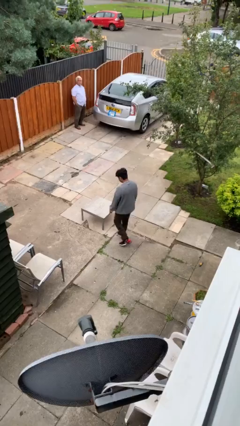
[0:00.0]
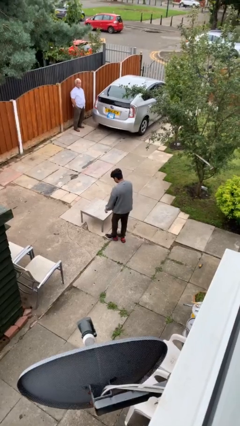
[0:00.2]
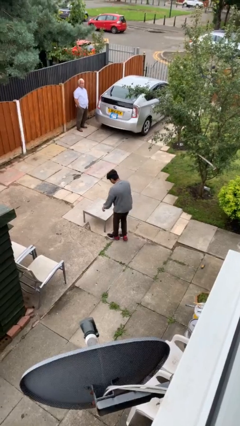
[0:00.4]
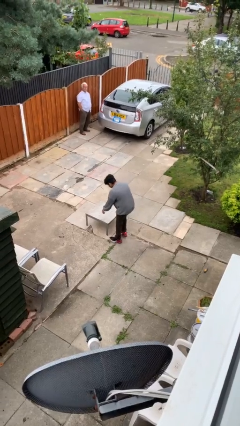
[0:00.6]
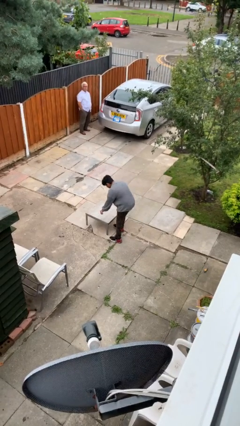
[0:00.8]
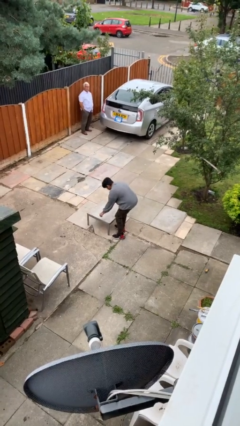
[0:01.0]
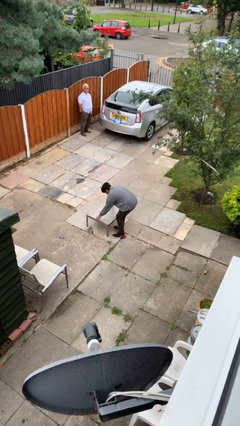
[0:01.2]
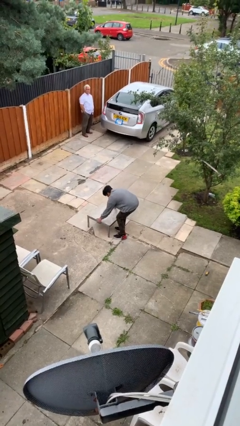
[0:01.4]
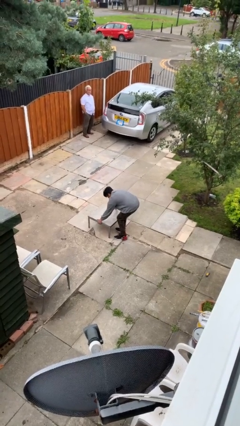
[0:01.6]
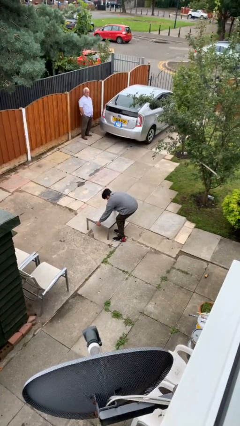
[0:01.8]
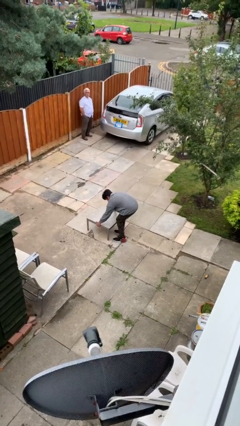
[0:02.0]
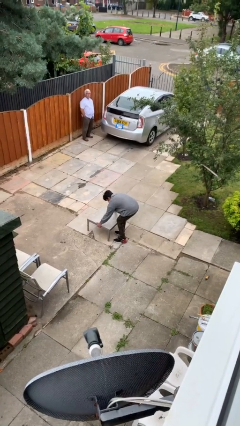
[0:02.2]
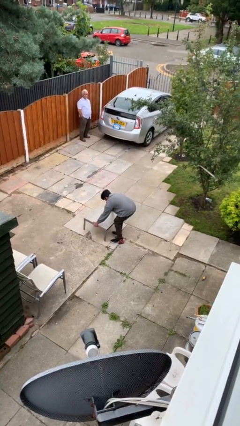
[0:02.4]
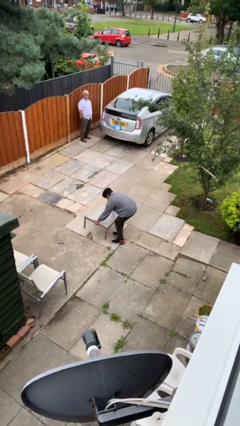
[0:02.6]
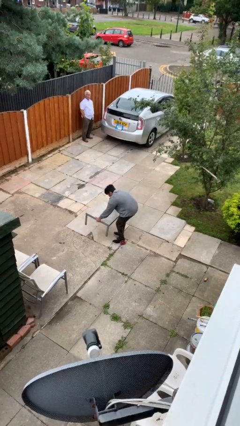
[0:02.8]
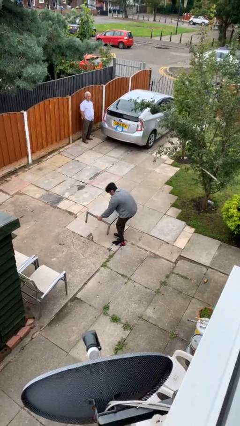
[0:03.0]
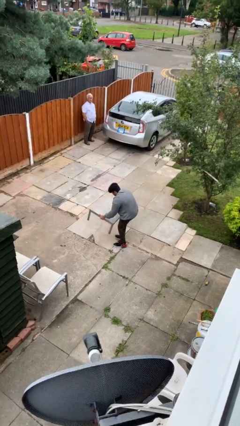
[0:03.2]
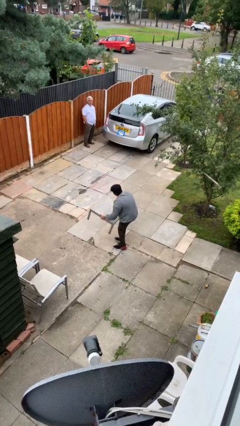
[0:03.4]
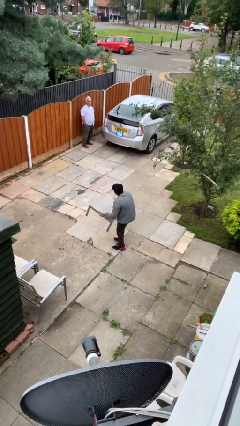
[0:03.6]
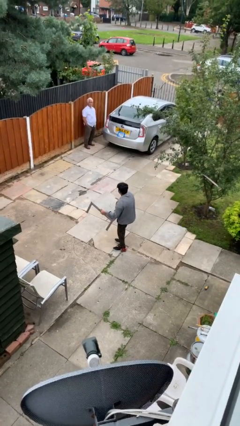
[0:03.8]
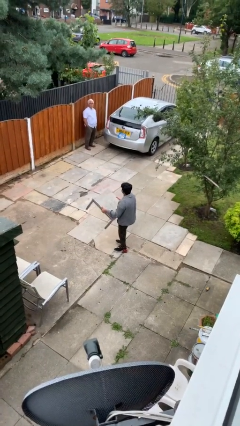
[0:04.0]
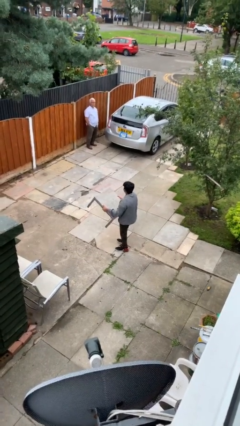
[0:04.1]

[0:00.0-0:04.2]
person picks up object from floor

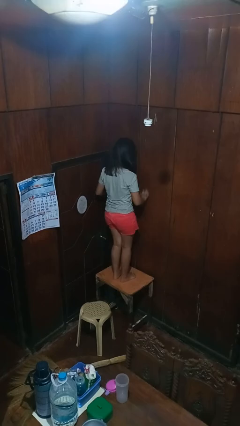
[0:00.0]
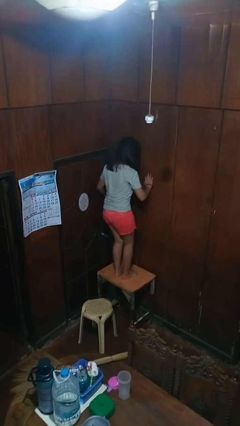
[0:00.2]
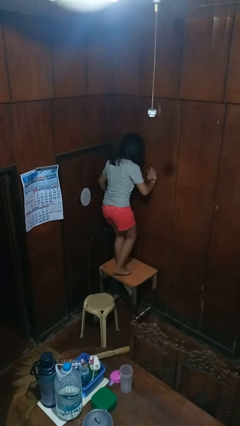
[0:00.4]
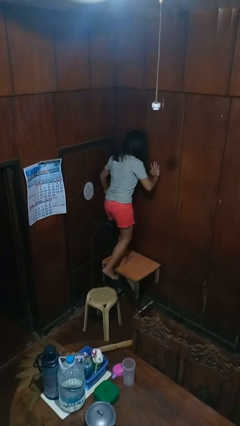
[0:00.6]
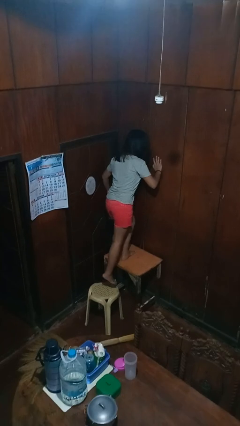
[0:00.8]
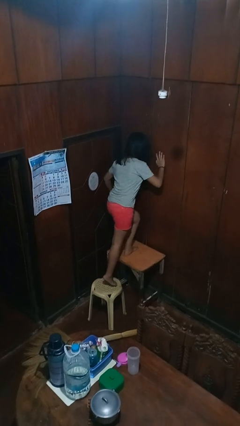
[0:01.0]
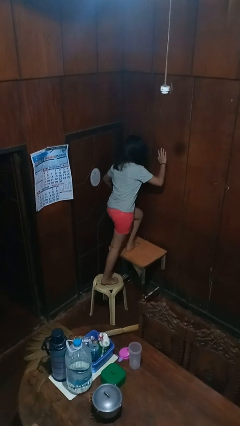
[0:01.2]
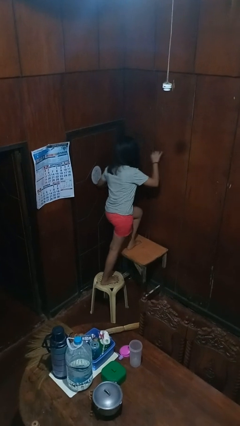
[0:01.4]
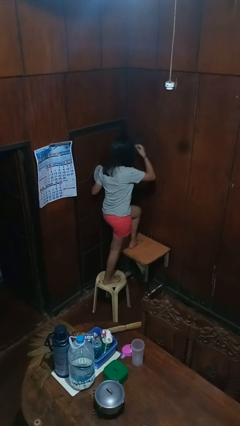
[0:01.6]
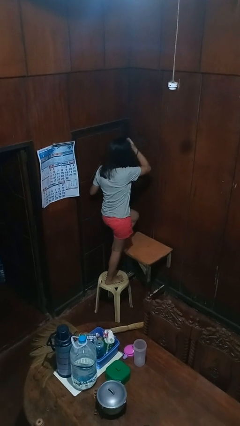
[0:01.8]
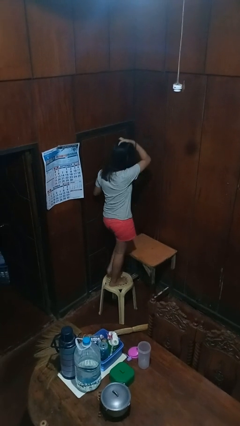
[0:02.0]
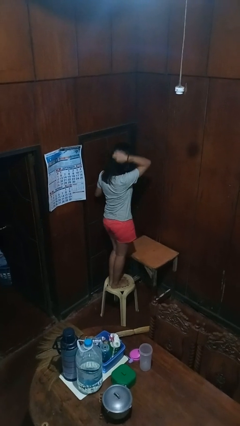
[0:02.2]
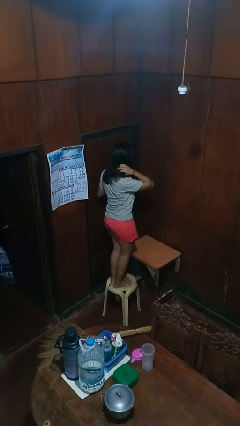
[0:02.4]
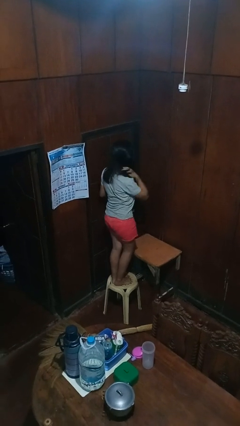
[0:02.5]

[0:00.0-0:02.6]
person climbs off table

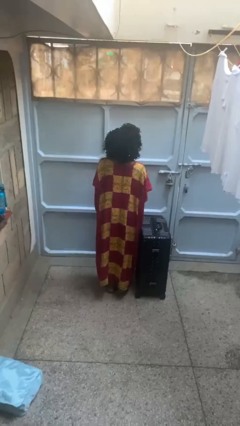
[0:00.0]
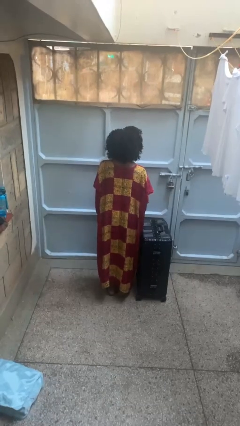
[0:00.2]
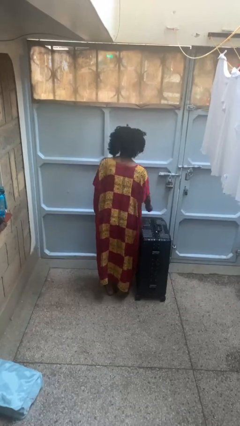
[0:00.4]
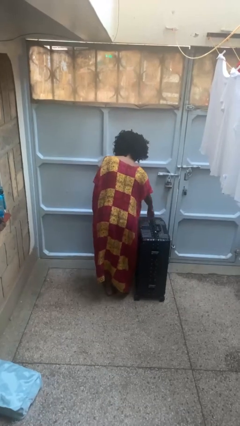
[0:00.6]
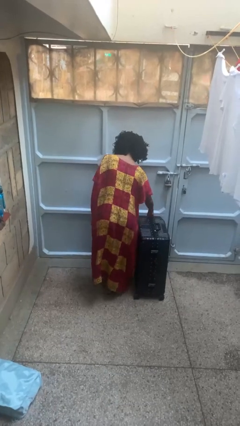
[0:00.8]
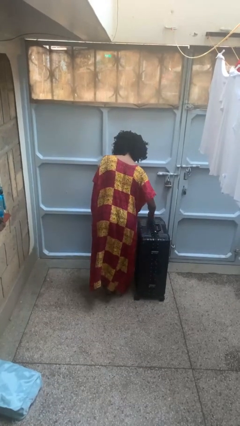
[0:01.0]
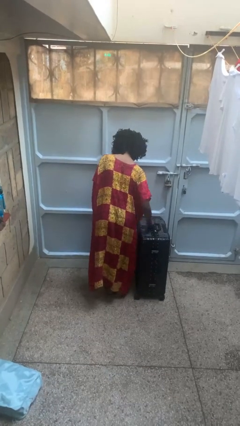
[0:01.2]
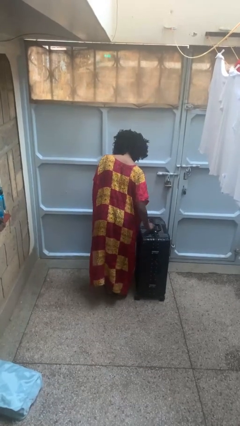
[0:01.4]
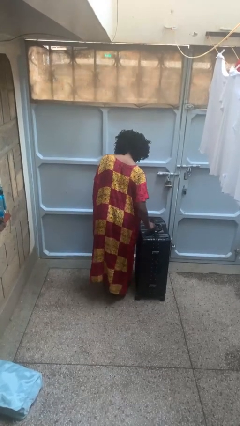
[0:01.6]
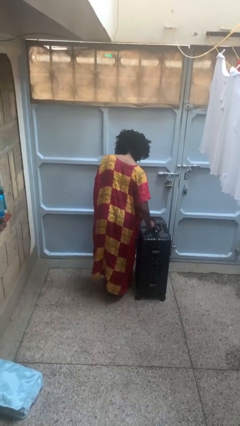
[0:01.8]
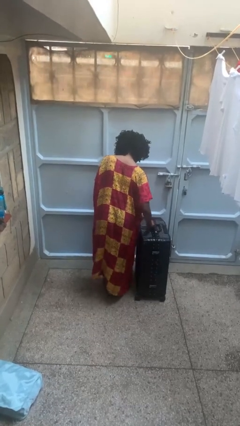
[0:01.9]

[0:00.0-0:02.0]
person opens suitcase

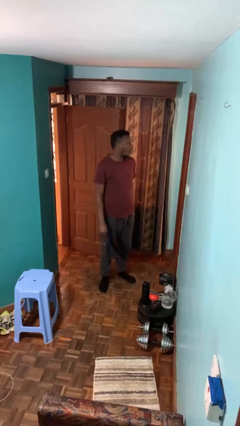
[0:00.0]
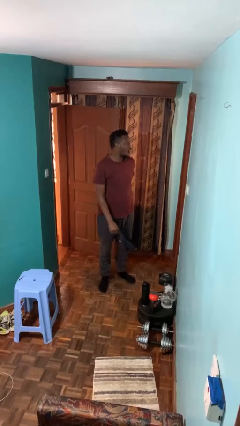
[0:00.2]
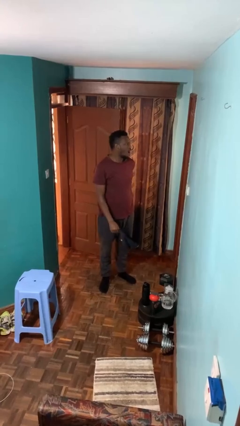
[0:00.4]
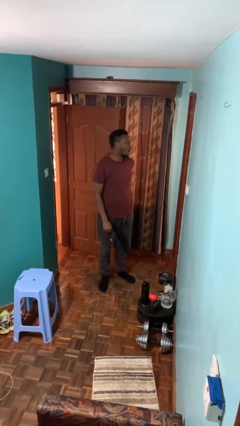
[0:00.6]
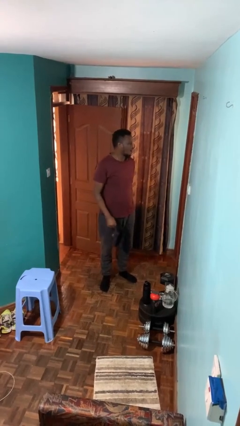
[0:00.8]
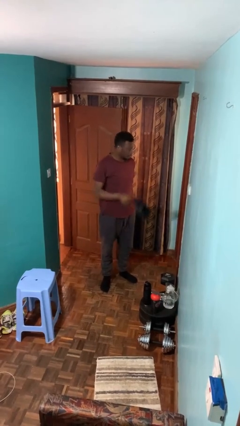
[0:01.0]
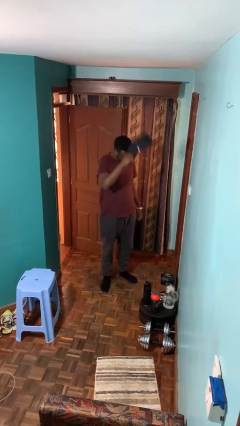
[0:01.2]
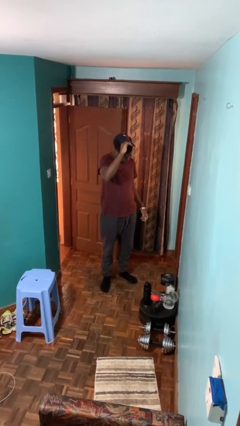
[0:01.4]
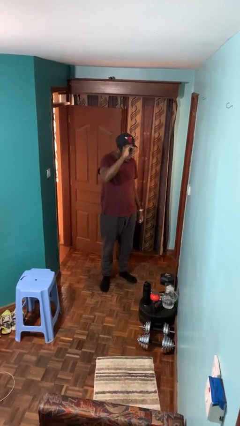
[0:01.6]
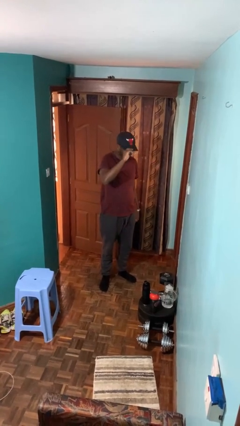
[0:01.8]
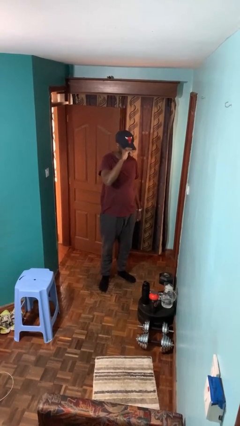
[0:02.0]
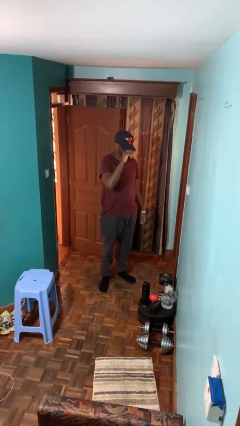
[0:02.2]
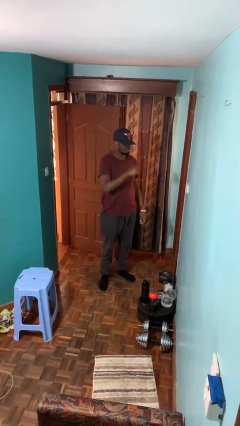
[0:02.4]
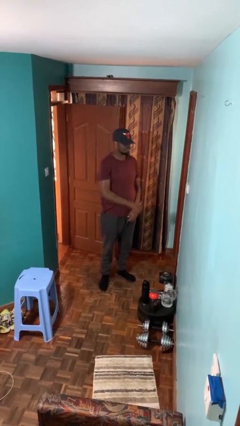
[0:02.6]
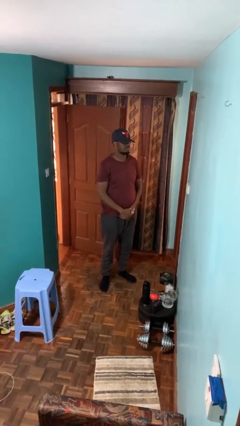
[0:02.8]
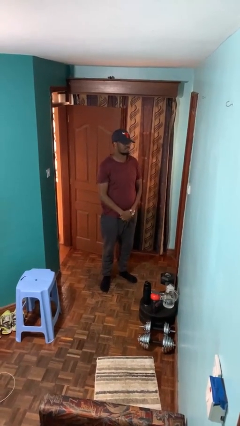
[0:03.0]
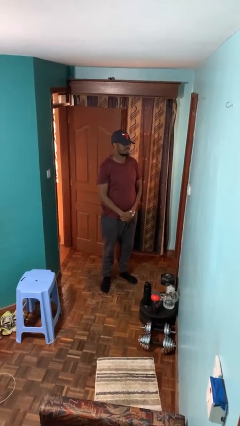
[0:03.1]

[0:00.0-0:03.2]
person puts on hat

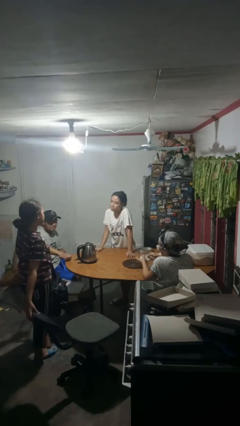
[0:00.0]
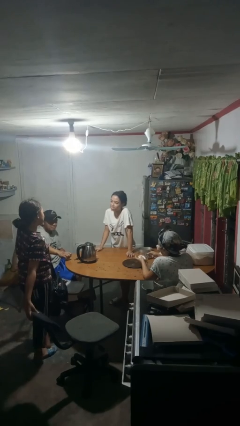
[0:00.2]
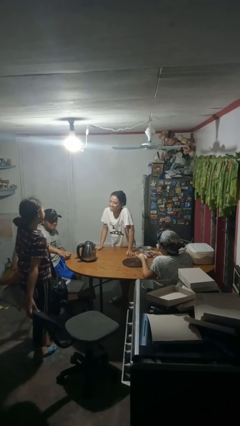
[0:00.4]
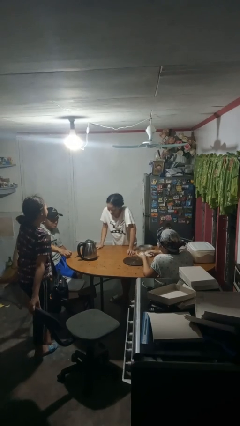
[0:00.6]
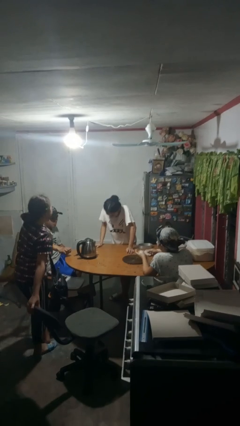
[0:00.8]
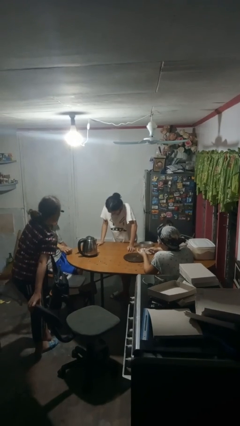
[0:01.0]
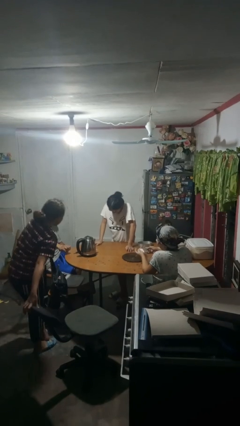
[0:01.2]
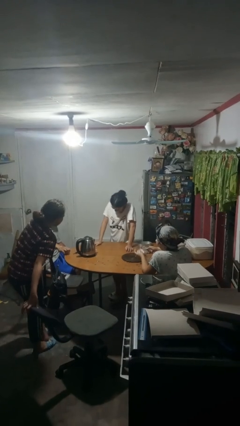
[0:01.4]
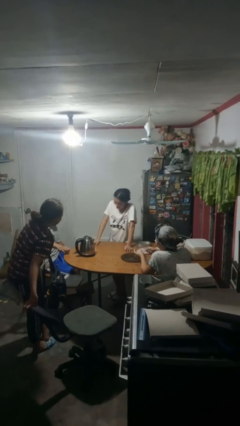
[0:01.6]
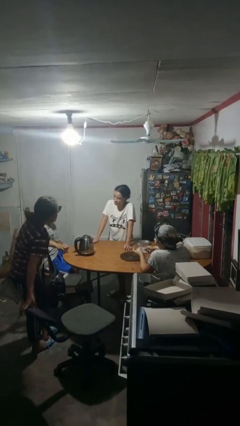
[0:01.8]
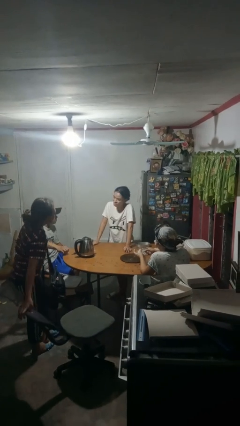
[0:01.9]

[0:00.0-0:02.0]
person laughs with person

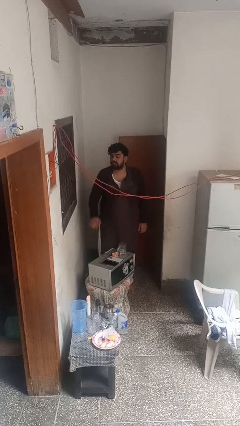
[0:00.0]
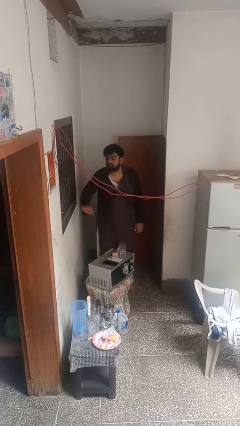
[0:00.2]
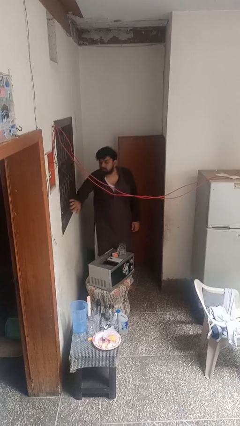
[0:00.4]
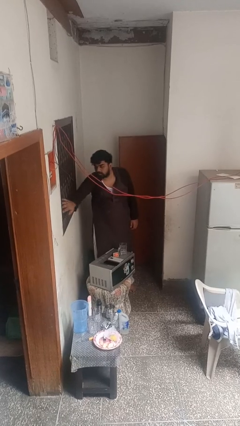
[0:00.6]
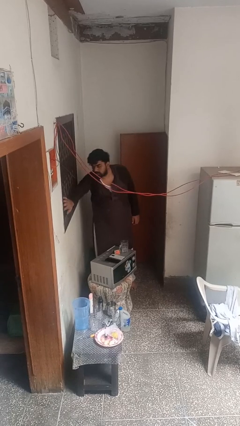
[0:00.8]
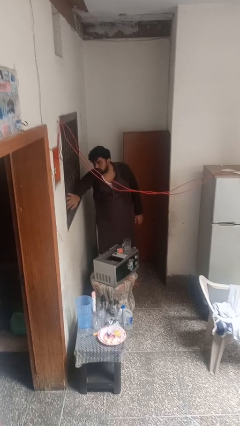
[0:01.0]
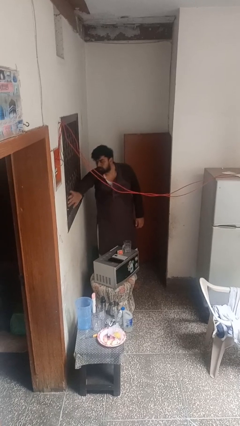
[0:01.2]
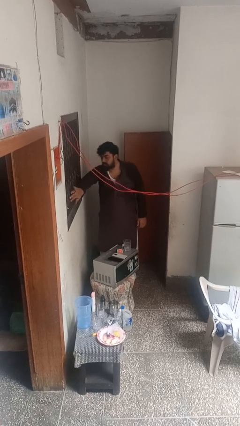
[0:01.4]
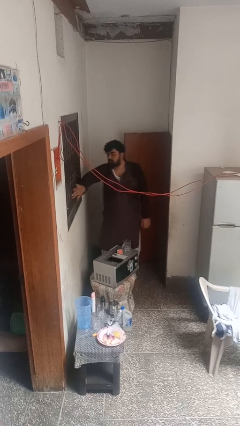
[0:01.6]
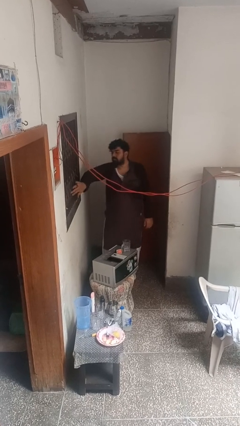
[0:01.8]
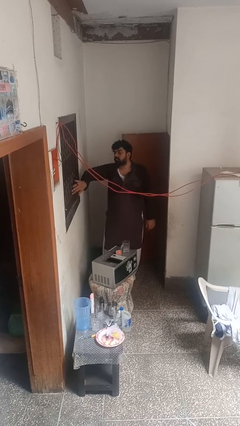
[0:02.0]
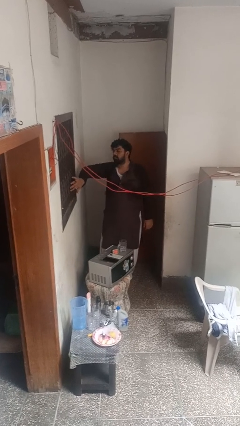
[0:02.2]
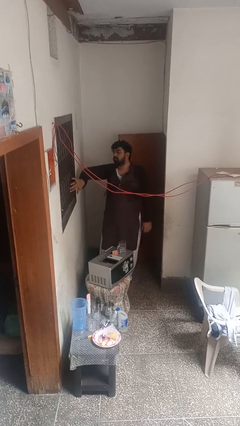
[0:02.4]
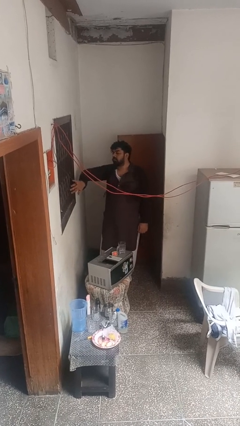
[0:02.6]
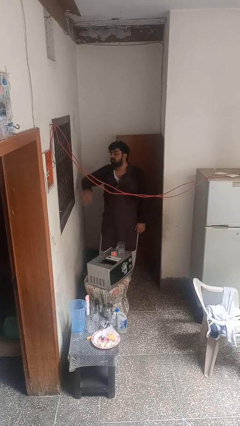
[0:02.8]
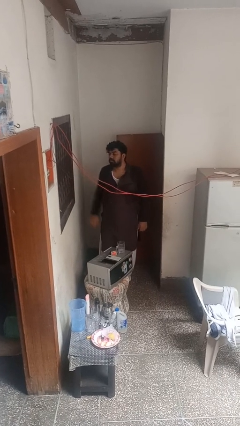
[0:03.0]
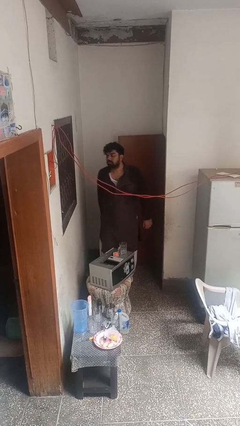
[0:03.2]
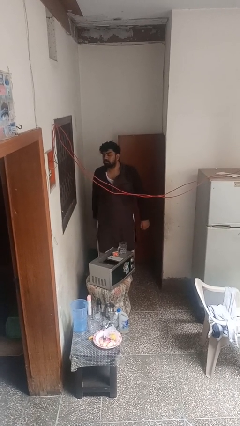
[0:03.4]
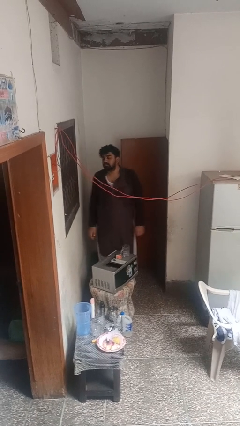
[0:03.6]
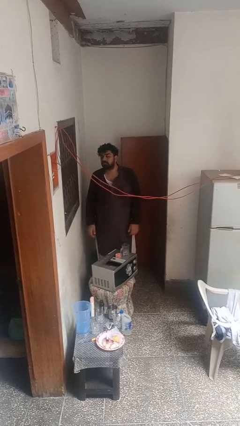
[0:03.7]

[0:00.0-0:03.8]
person closes home window
